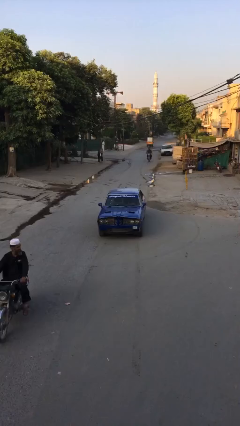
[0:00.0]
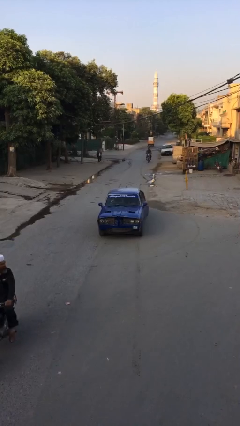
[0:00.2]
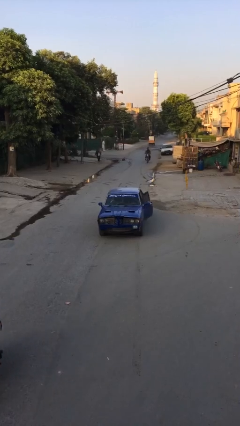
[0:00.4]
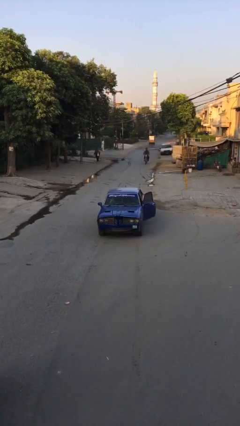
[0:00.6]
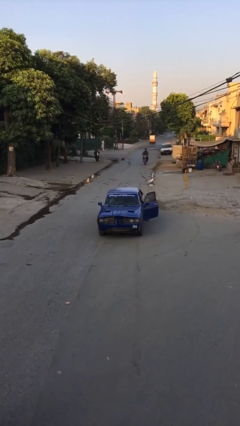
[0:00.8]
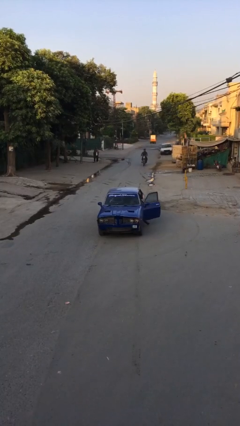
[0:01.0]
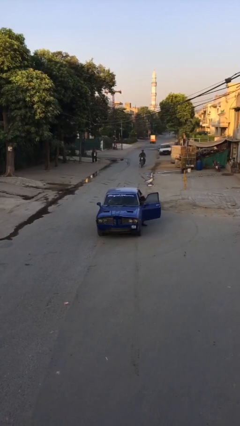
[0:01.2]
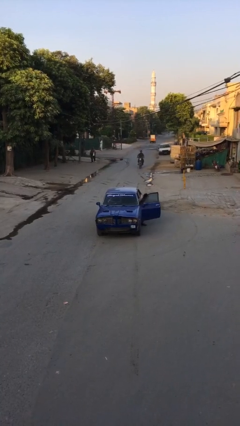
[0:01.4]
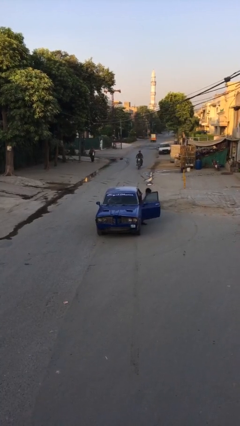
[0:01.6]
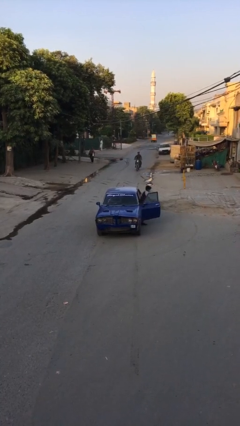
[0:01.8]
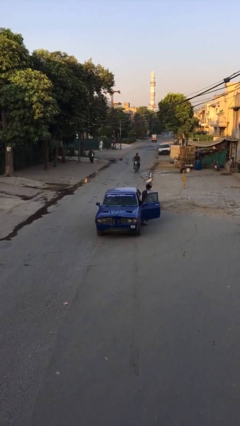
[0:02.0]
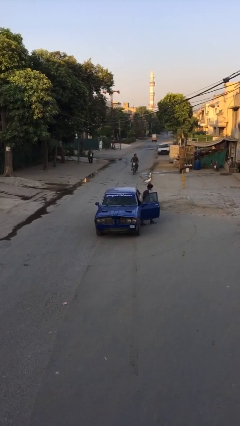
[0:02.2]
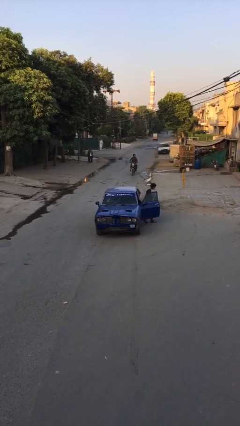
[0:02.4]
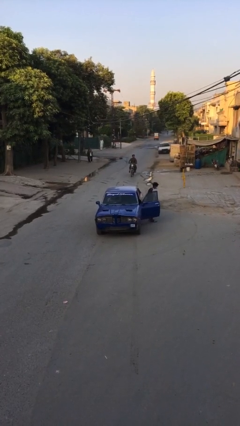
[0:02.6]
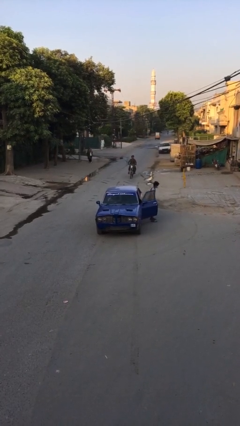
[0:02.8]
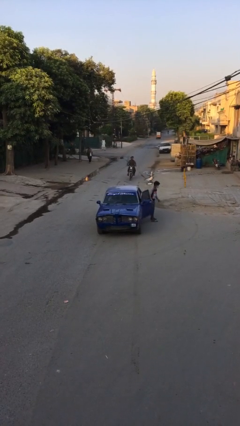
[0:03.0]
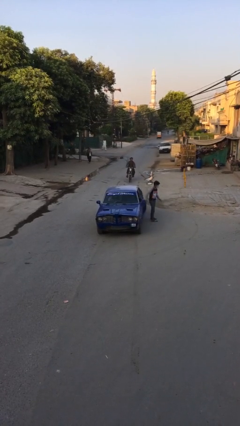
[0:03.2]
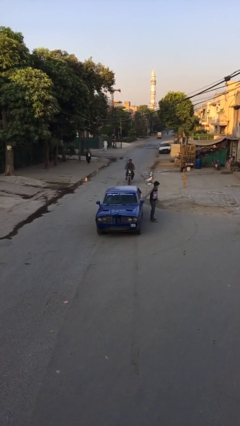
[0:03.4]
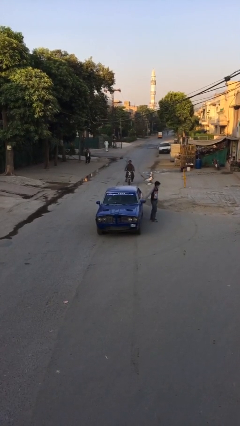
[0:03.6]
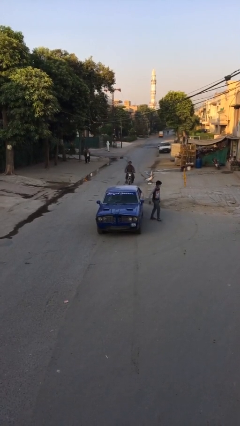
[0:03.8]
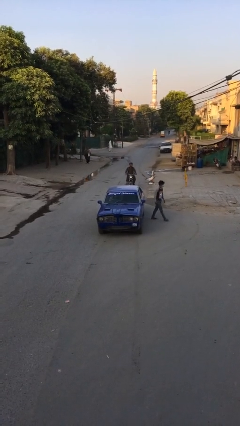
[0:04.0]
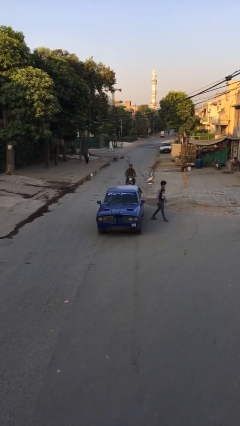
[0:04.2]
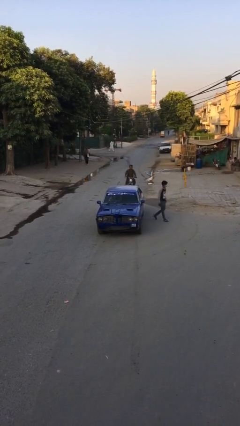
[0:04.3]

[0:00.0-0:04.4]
car drops off person

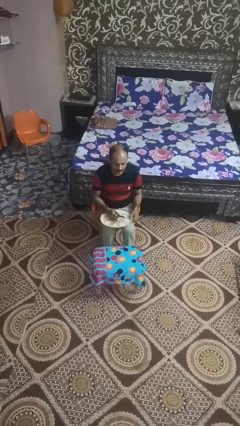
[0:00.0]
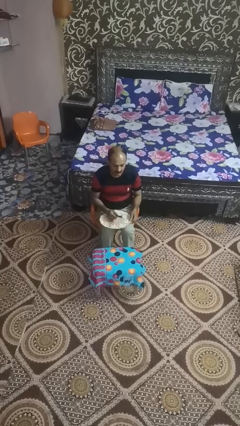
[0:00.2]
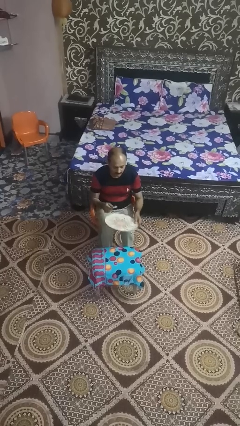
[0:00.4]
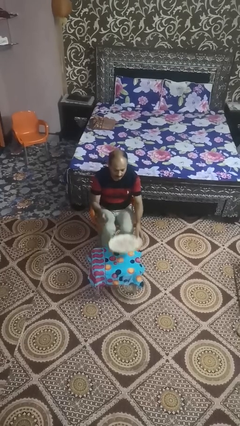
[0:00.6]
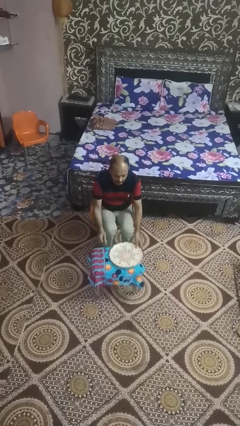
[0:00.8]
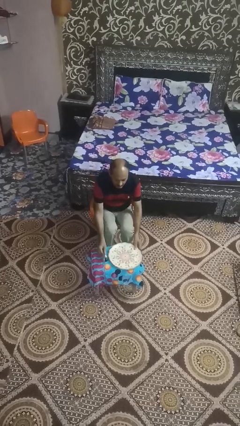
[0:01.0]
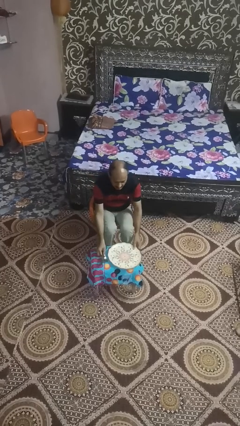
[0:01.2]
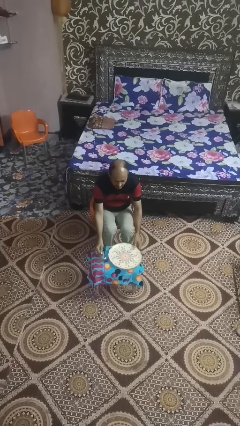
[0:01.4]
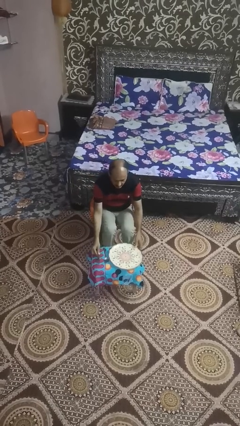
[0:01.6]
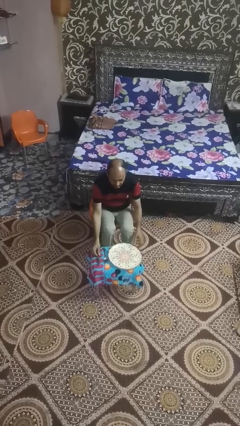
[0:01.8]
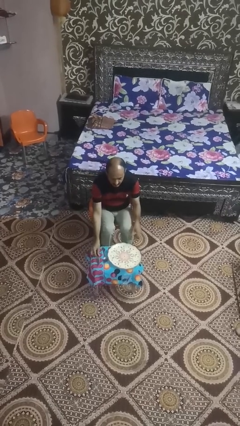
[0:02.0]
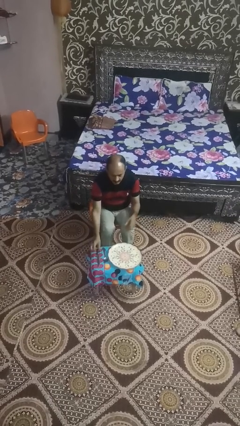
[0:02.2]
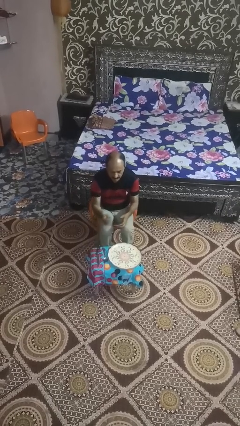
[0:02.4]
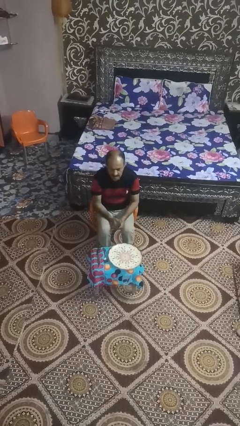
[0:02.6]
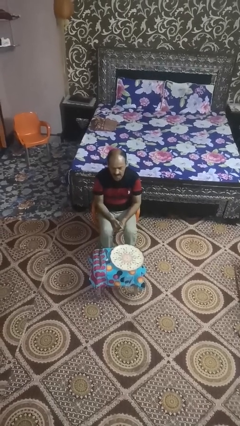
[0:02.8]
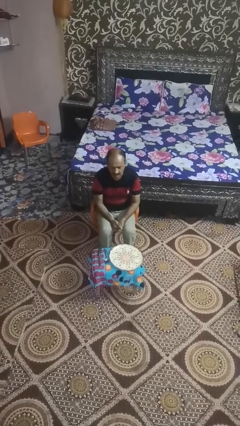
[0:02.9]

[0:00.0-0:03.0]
person sets table

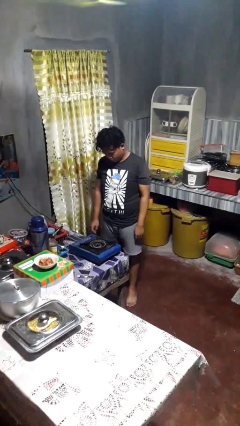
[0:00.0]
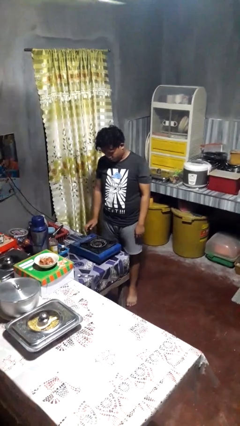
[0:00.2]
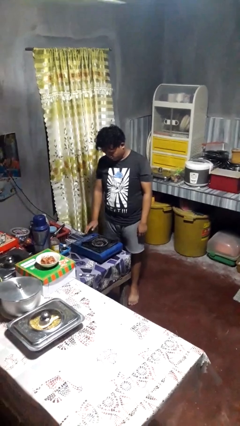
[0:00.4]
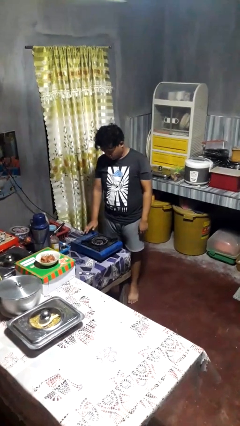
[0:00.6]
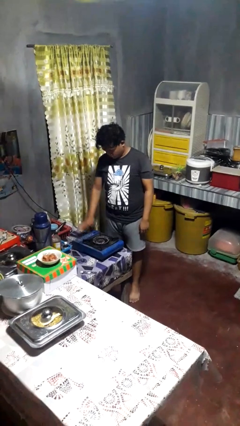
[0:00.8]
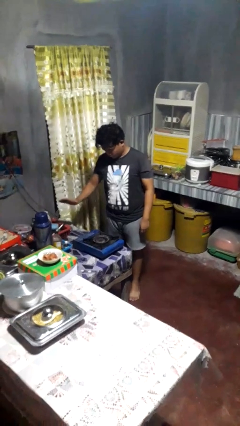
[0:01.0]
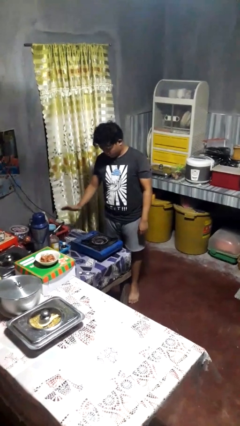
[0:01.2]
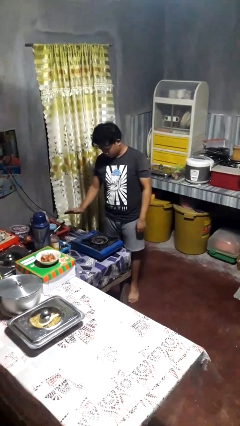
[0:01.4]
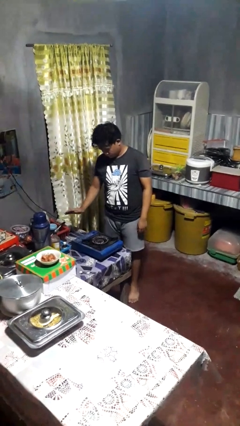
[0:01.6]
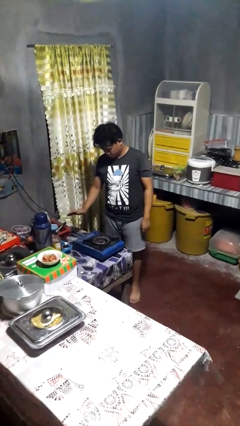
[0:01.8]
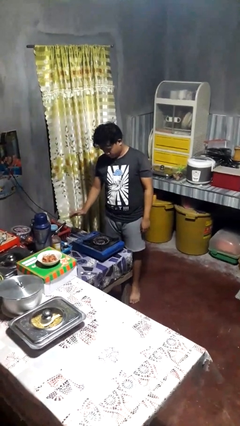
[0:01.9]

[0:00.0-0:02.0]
person burns hand

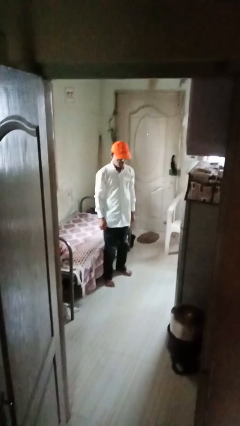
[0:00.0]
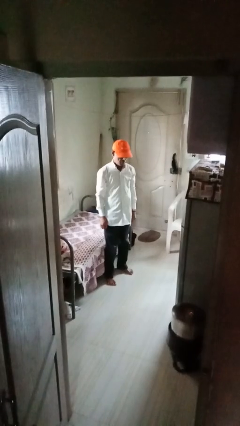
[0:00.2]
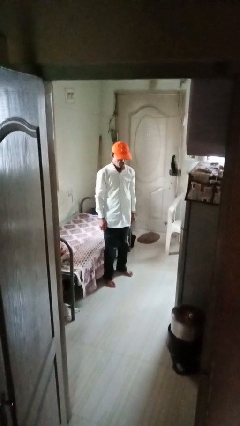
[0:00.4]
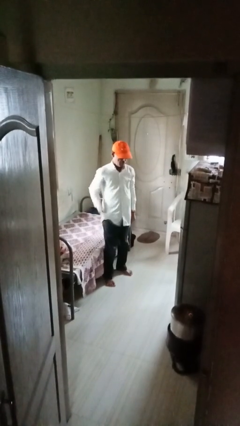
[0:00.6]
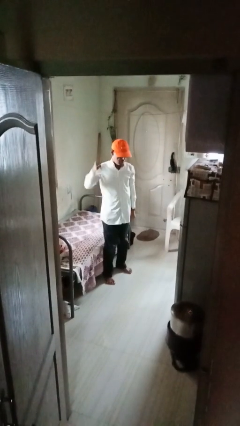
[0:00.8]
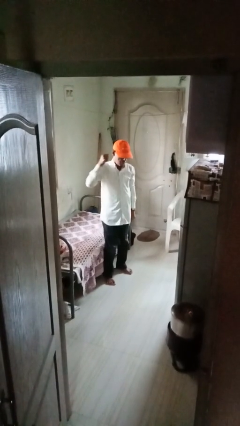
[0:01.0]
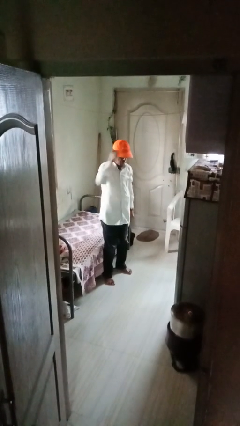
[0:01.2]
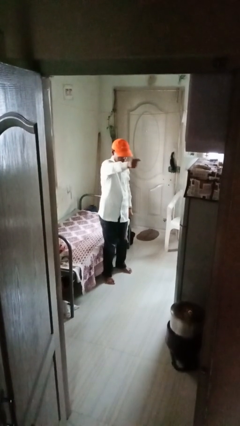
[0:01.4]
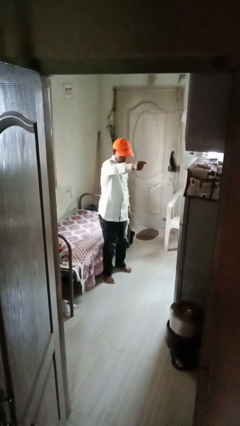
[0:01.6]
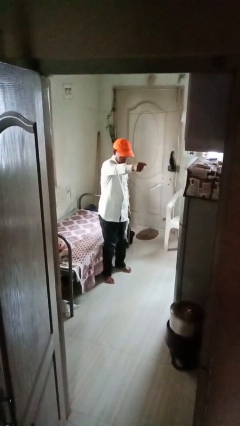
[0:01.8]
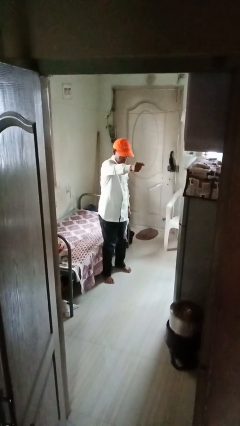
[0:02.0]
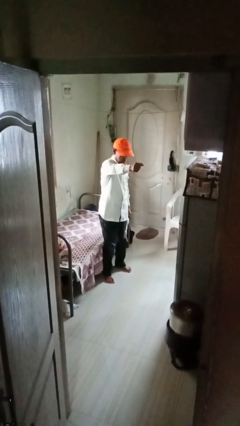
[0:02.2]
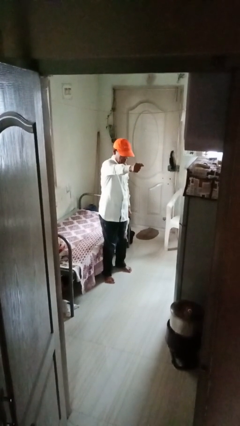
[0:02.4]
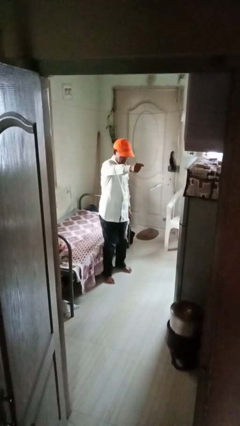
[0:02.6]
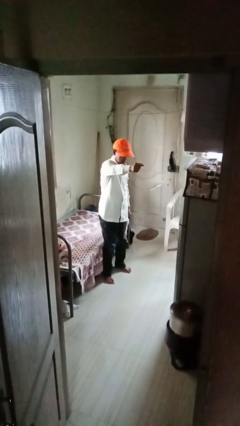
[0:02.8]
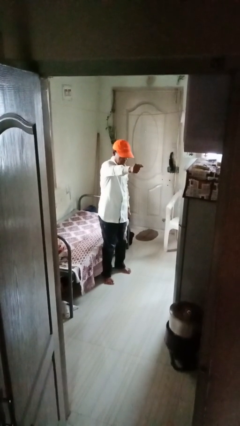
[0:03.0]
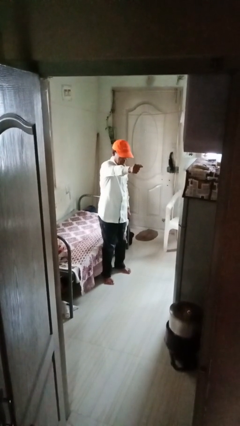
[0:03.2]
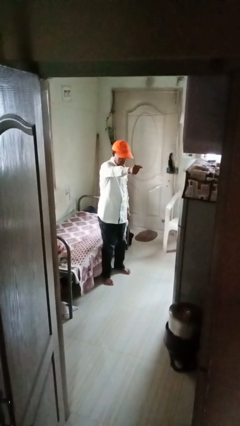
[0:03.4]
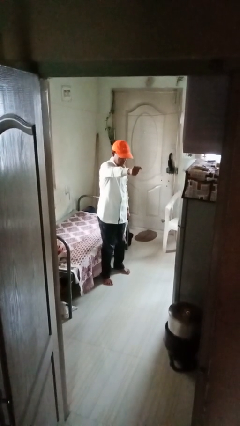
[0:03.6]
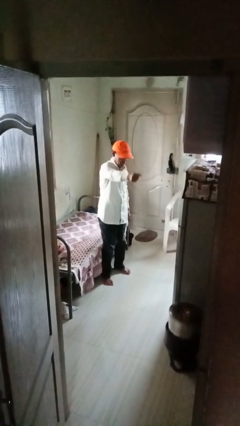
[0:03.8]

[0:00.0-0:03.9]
person punches

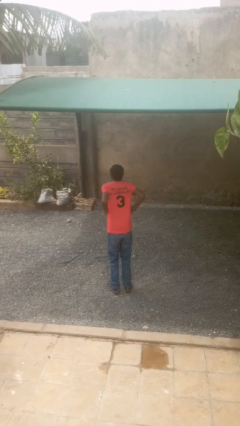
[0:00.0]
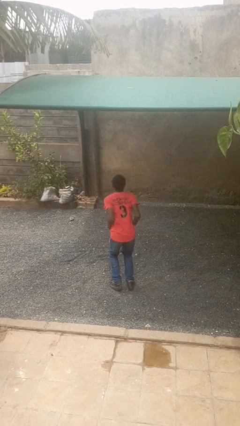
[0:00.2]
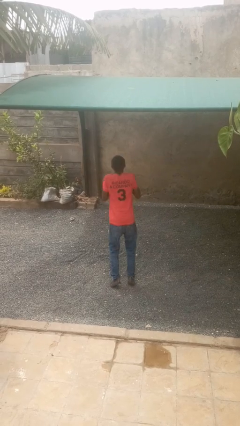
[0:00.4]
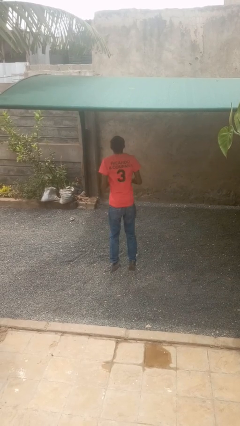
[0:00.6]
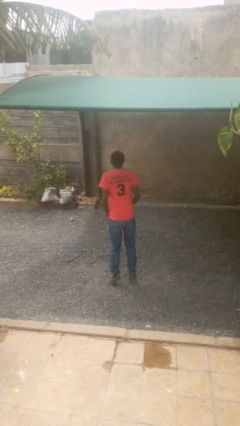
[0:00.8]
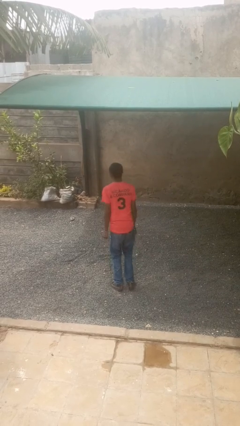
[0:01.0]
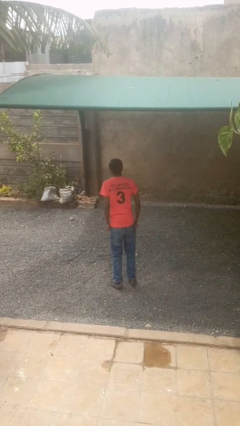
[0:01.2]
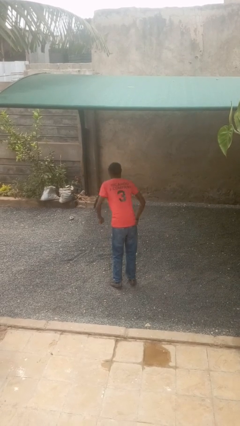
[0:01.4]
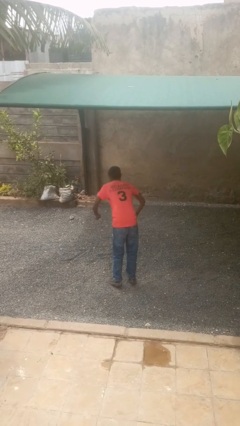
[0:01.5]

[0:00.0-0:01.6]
person jumps

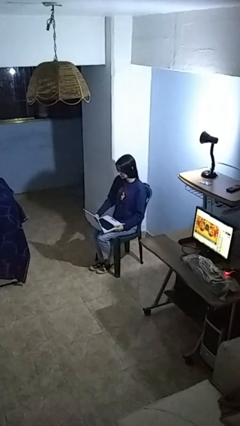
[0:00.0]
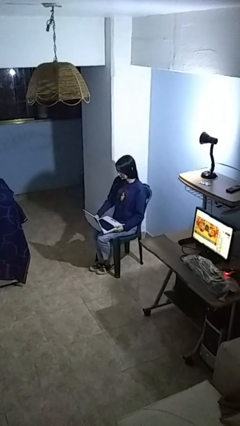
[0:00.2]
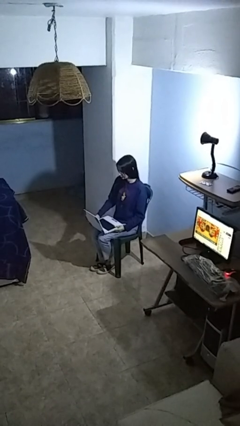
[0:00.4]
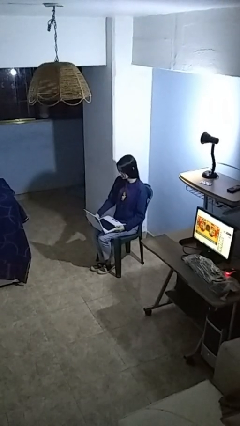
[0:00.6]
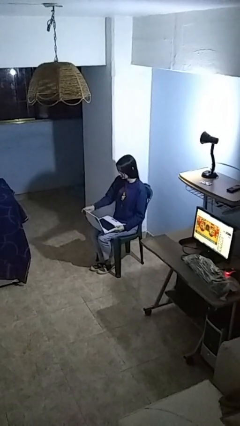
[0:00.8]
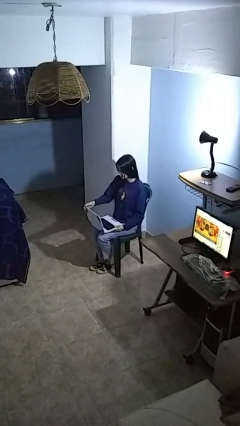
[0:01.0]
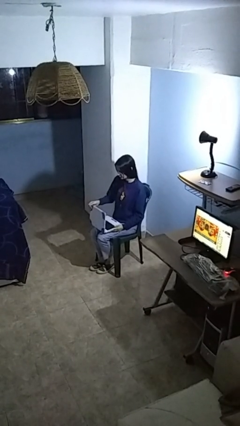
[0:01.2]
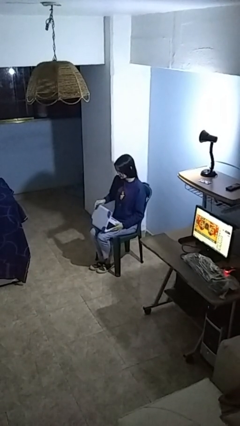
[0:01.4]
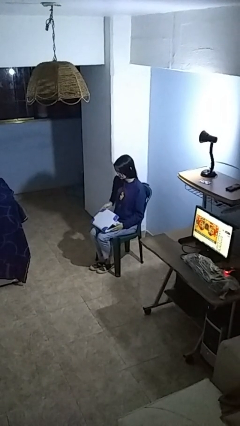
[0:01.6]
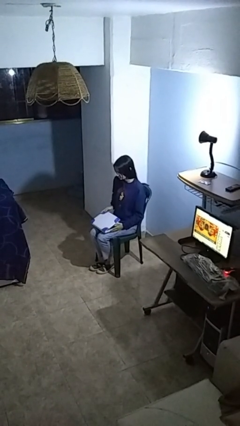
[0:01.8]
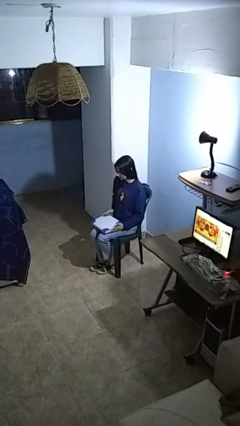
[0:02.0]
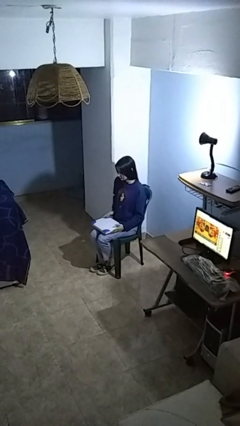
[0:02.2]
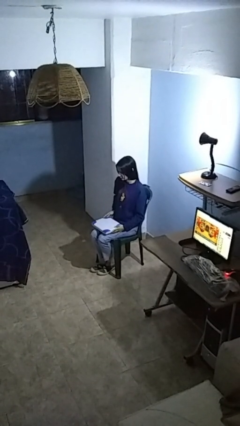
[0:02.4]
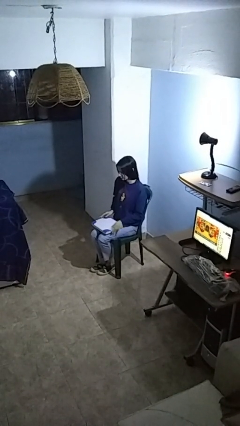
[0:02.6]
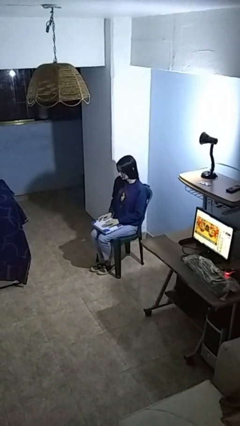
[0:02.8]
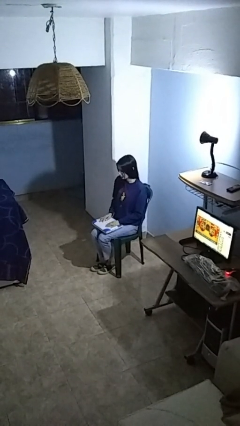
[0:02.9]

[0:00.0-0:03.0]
person closes laptop
